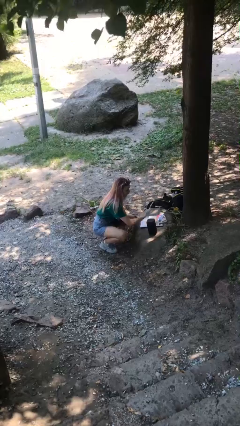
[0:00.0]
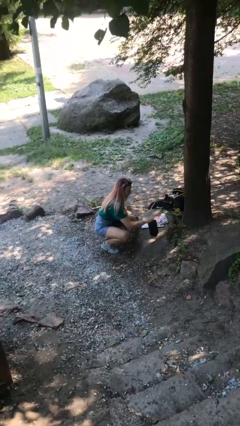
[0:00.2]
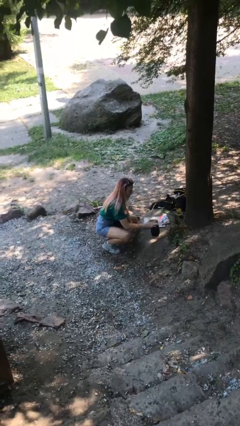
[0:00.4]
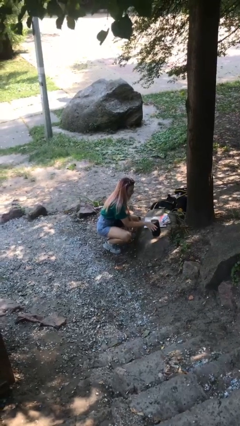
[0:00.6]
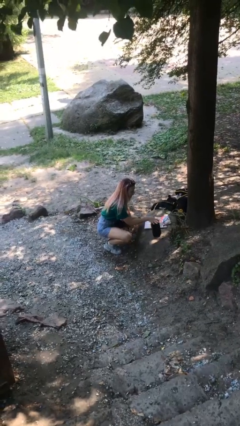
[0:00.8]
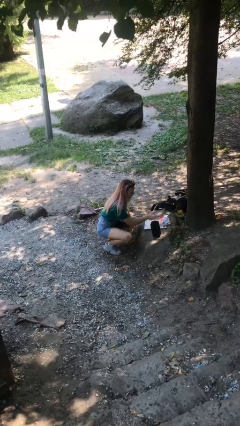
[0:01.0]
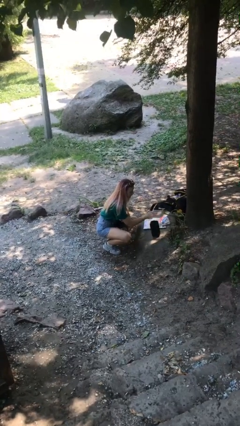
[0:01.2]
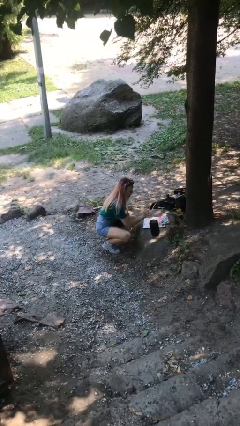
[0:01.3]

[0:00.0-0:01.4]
person waves hand over object

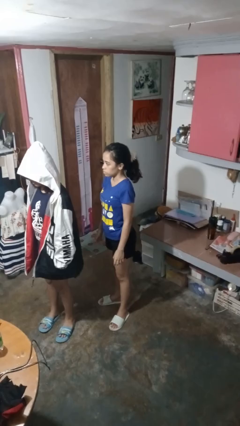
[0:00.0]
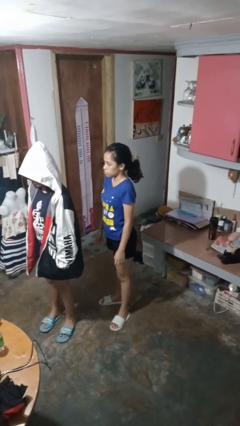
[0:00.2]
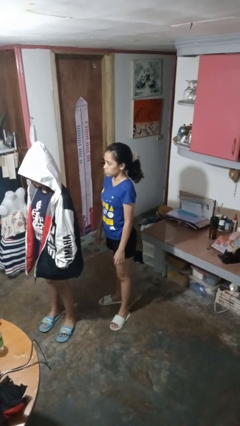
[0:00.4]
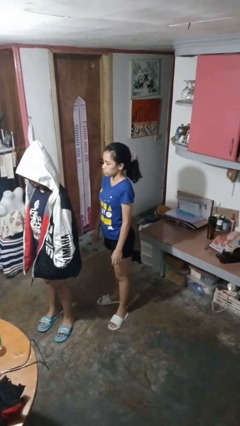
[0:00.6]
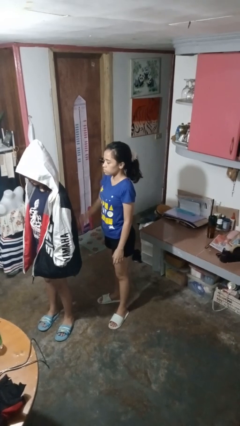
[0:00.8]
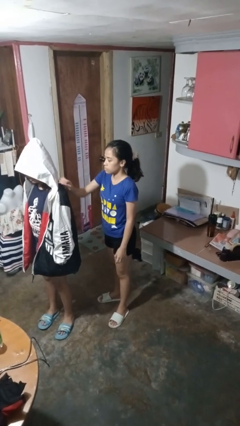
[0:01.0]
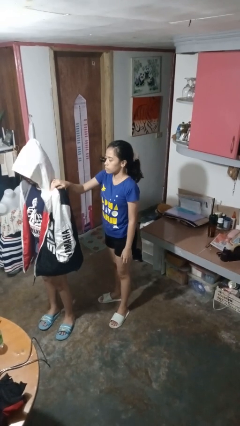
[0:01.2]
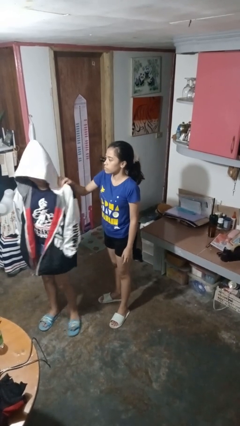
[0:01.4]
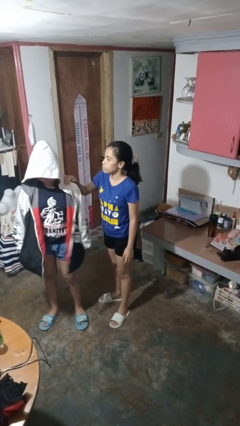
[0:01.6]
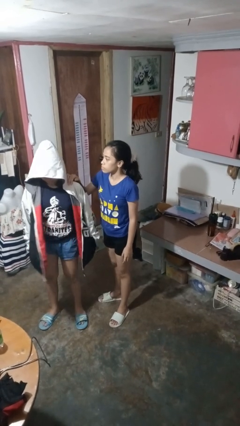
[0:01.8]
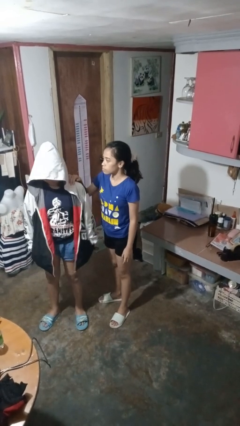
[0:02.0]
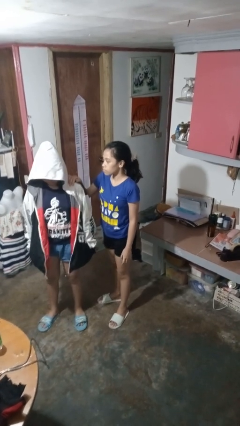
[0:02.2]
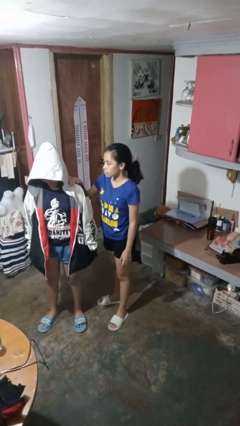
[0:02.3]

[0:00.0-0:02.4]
person grabs person by shoulder

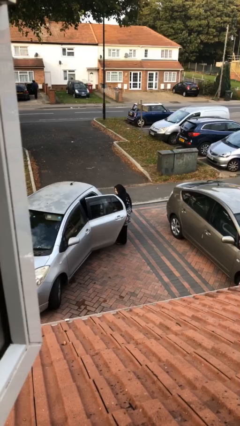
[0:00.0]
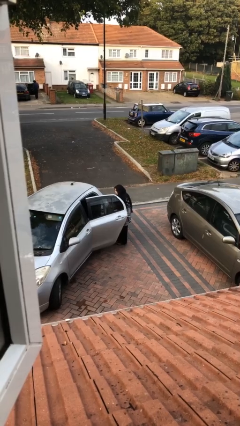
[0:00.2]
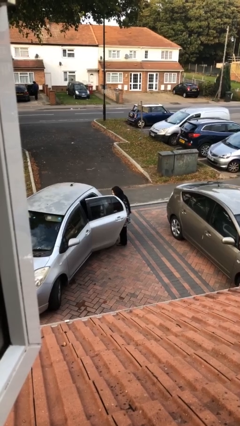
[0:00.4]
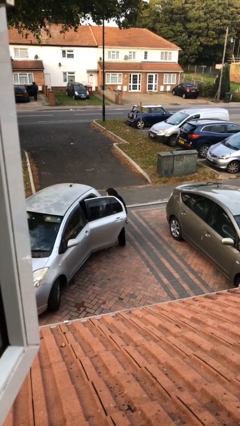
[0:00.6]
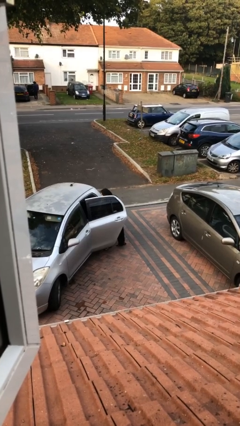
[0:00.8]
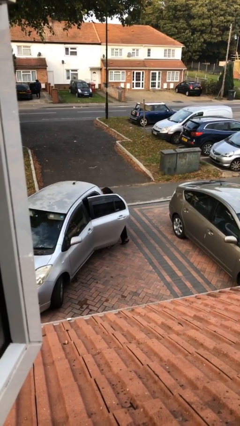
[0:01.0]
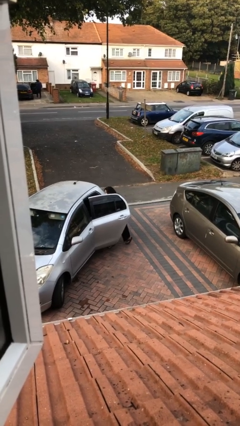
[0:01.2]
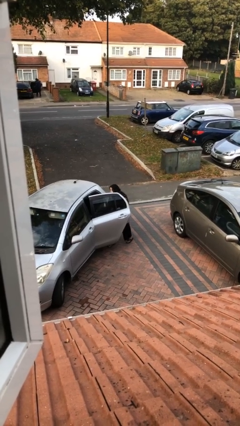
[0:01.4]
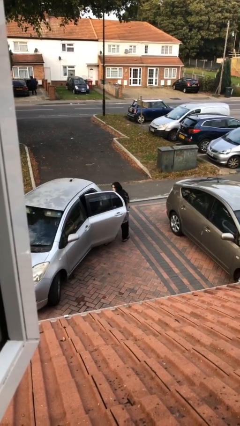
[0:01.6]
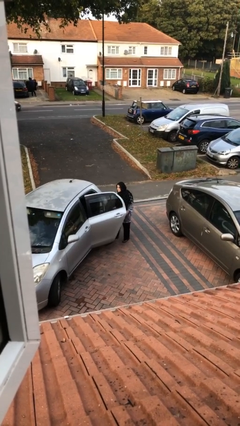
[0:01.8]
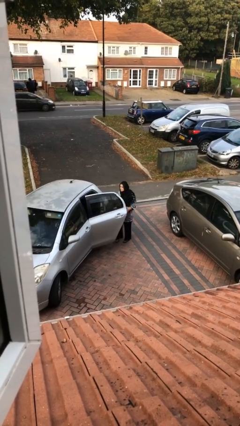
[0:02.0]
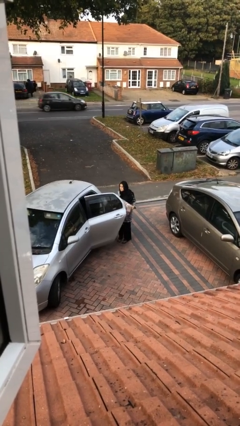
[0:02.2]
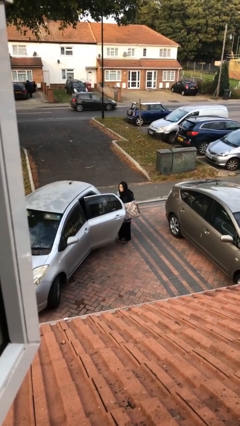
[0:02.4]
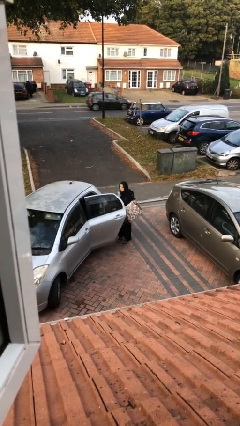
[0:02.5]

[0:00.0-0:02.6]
person unloads car

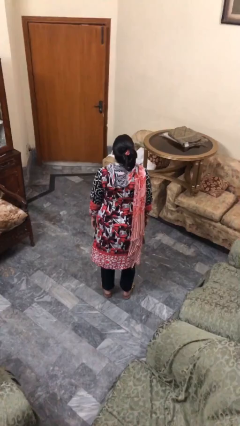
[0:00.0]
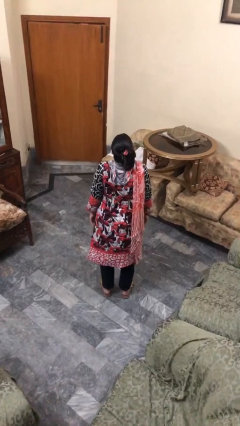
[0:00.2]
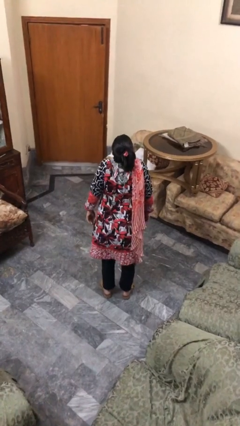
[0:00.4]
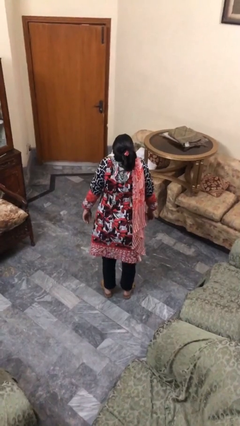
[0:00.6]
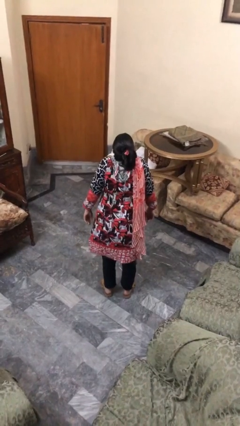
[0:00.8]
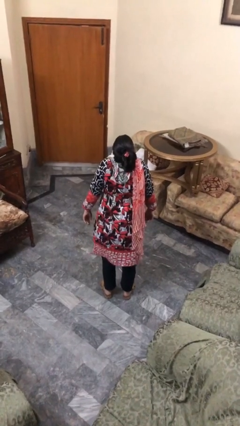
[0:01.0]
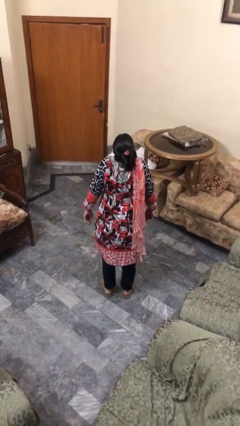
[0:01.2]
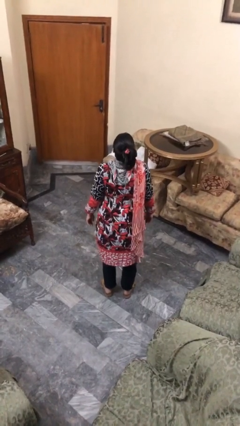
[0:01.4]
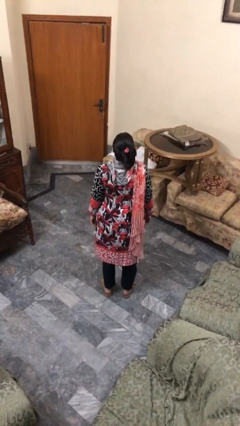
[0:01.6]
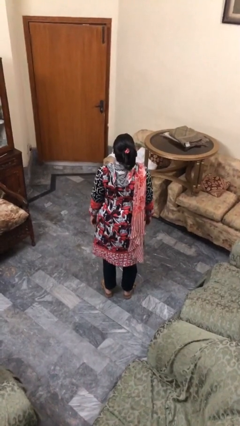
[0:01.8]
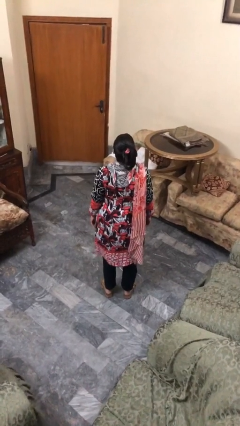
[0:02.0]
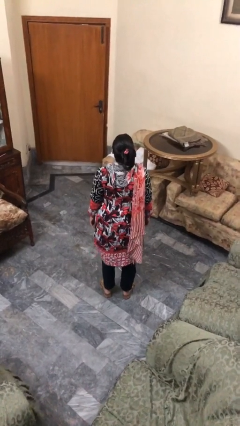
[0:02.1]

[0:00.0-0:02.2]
person shrugs

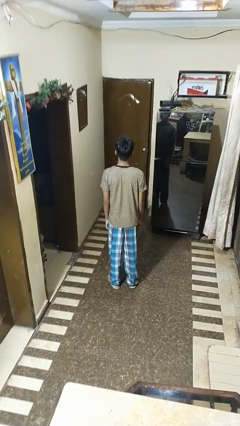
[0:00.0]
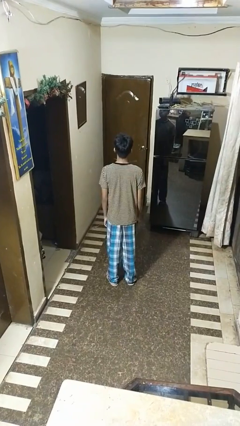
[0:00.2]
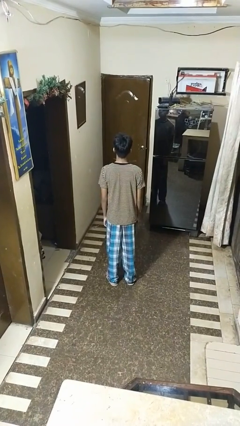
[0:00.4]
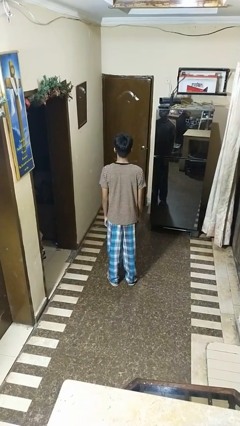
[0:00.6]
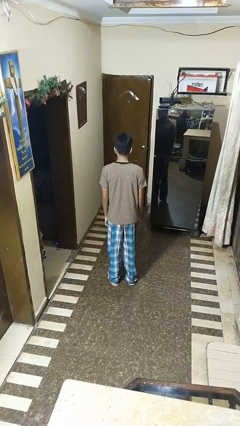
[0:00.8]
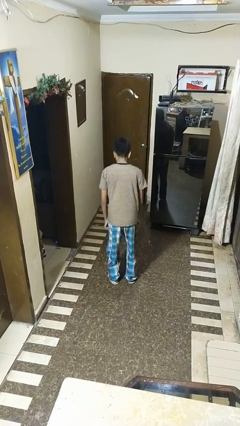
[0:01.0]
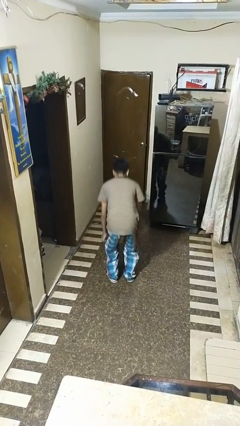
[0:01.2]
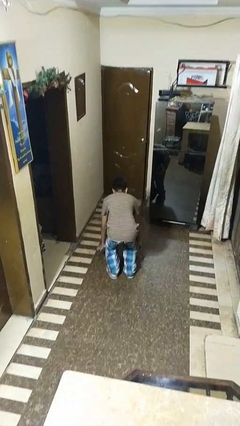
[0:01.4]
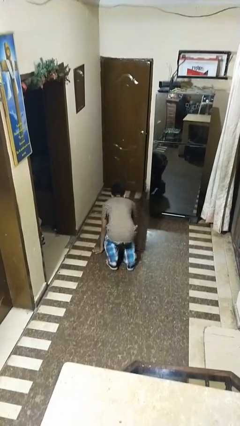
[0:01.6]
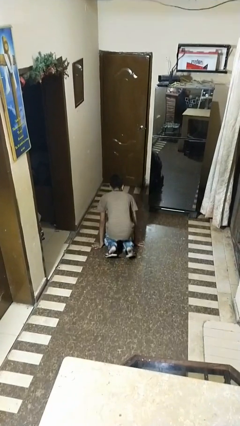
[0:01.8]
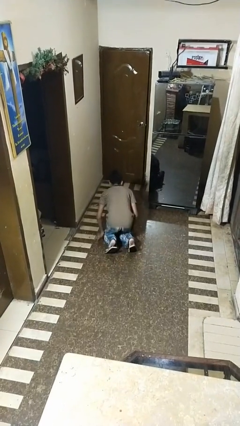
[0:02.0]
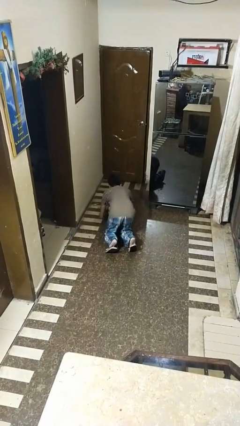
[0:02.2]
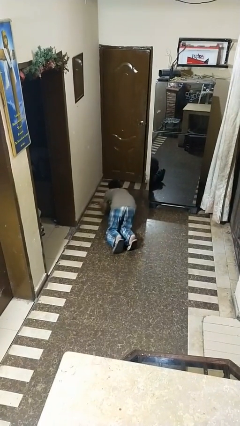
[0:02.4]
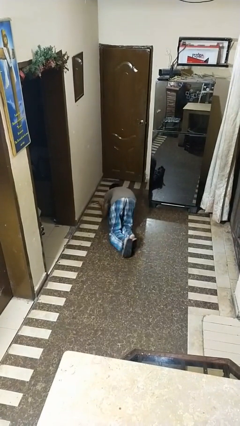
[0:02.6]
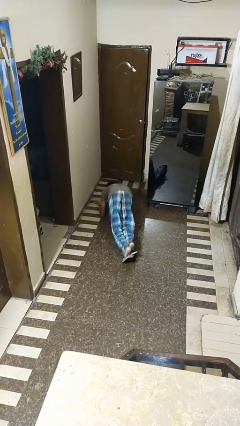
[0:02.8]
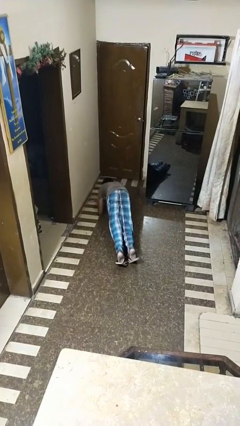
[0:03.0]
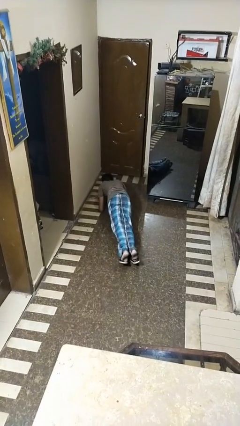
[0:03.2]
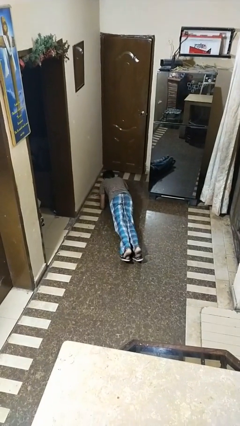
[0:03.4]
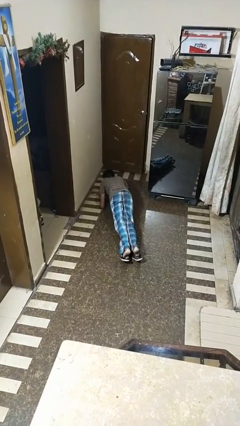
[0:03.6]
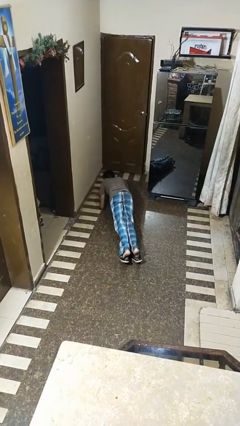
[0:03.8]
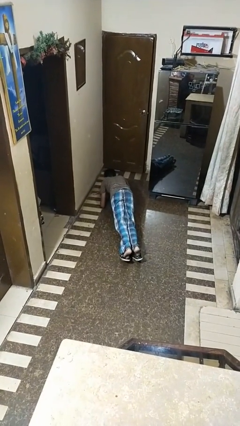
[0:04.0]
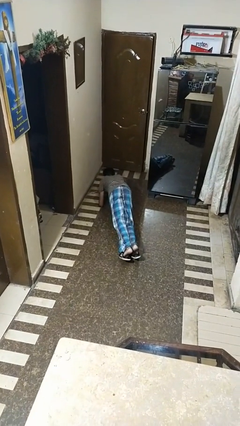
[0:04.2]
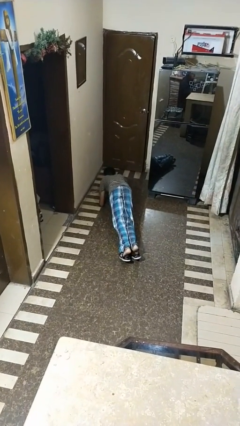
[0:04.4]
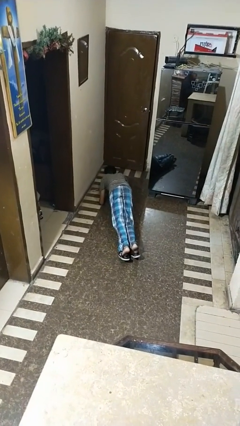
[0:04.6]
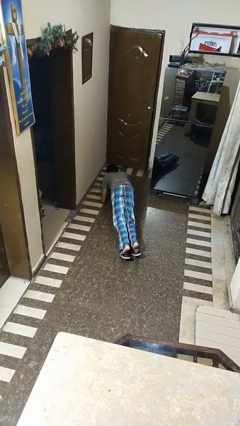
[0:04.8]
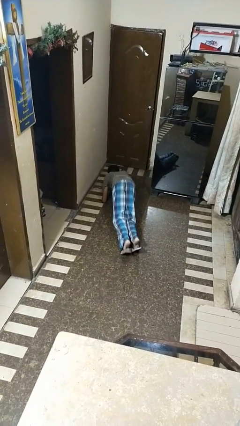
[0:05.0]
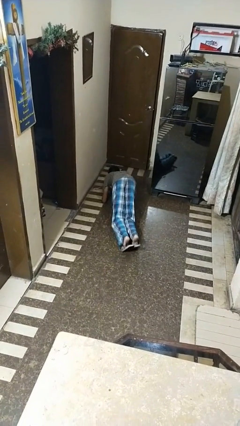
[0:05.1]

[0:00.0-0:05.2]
person exercises with plank

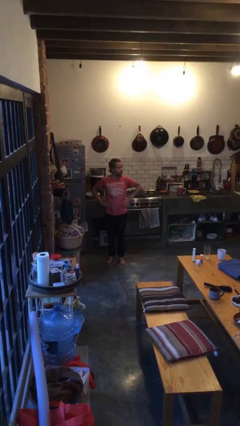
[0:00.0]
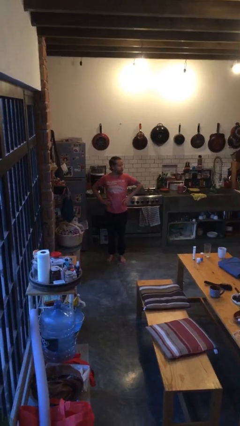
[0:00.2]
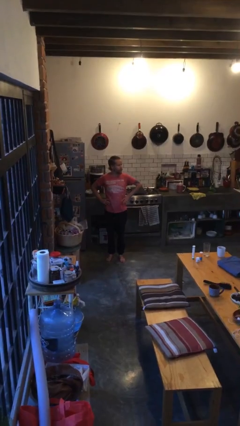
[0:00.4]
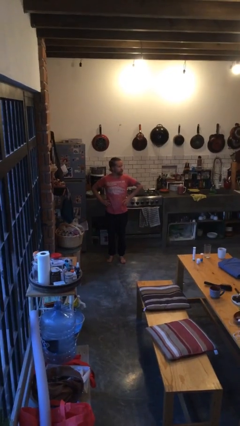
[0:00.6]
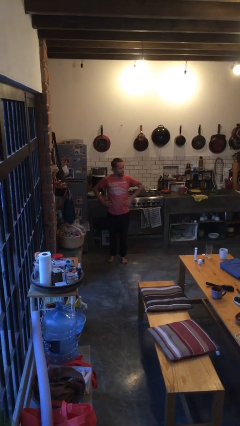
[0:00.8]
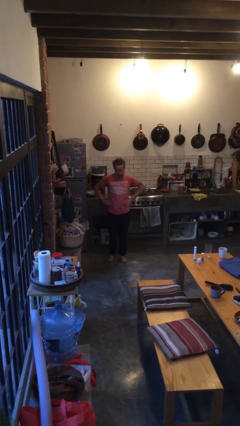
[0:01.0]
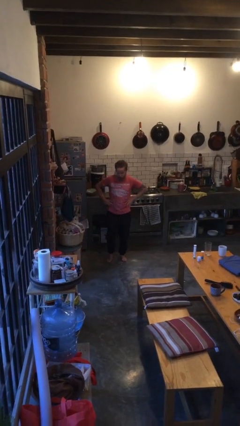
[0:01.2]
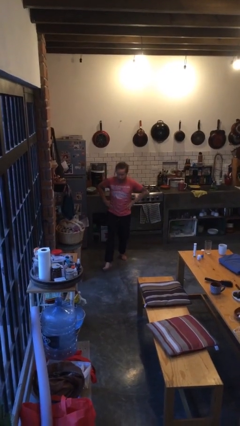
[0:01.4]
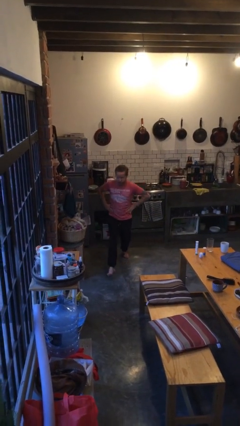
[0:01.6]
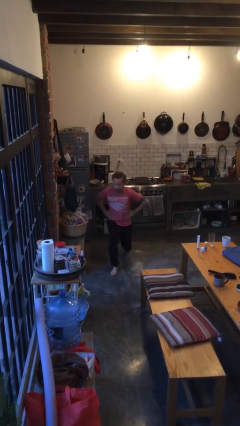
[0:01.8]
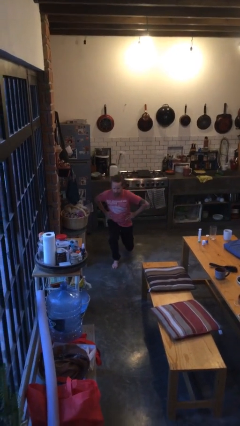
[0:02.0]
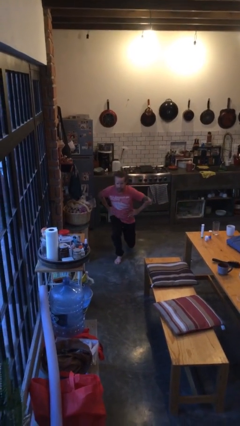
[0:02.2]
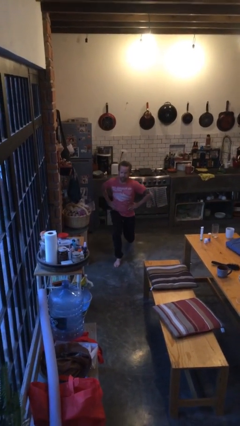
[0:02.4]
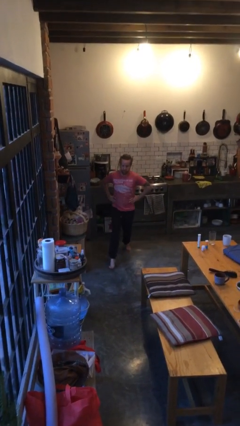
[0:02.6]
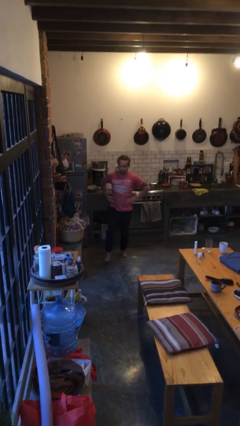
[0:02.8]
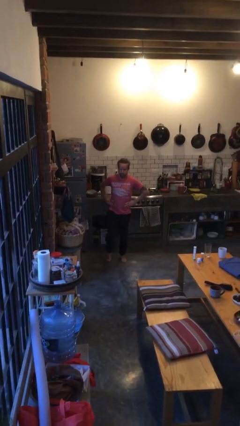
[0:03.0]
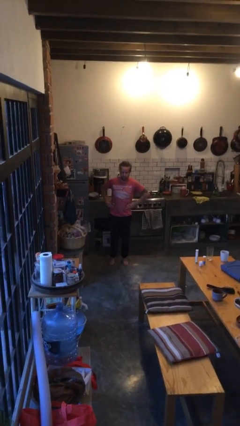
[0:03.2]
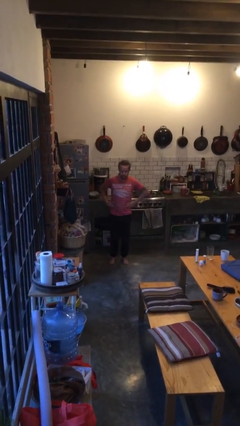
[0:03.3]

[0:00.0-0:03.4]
person exercises with lunges
